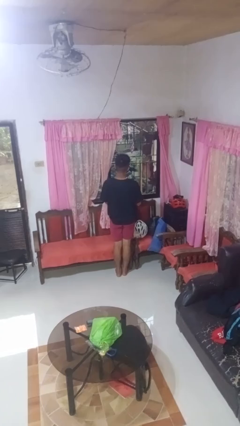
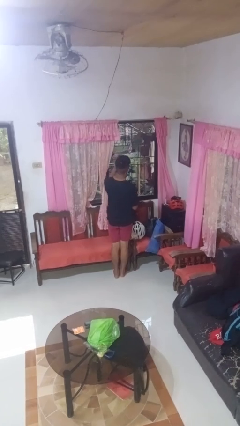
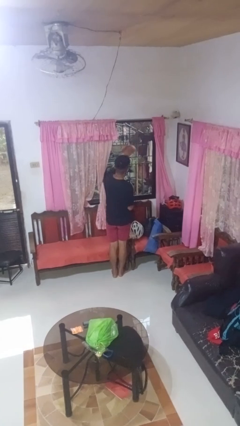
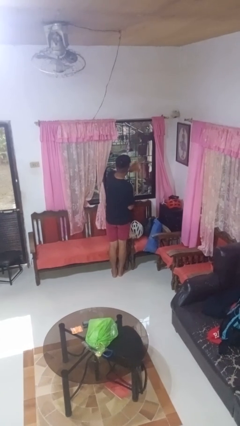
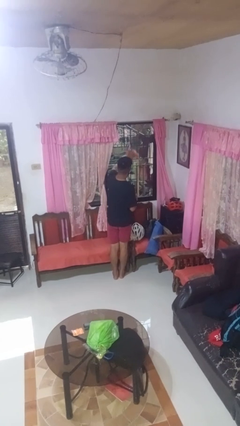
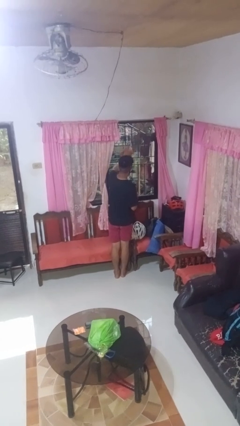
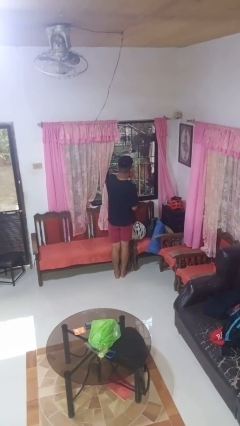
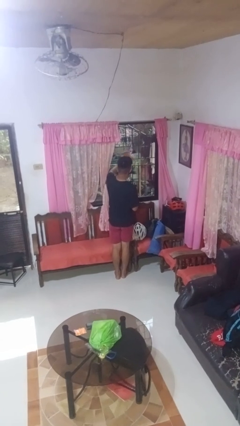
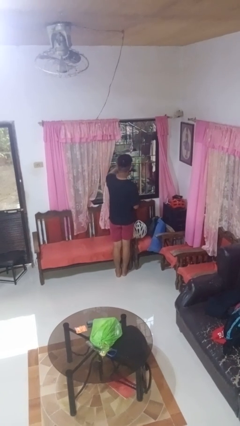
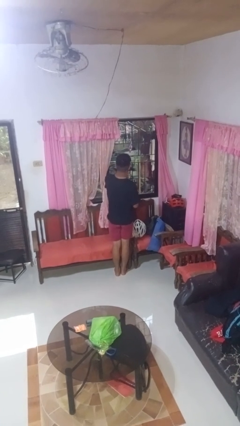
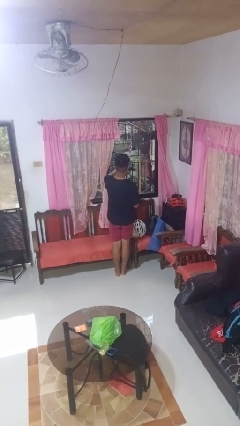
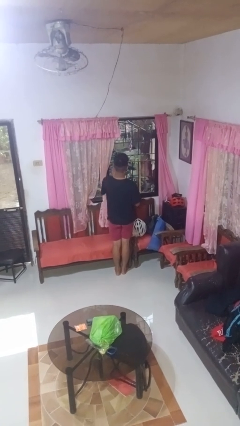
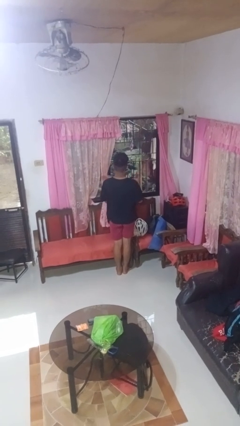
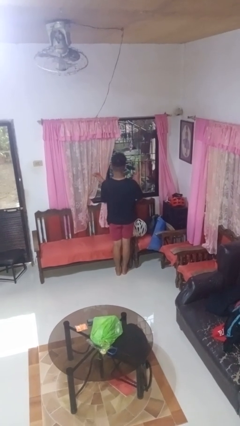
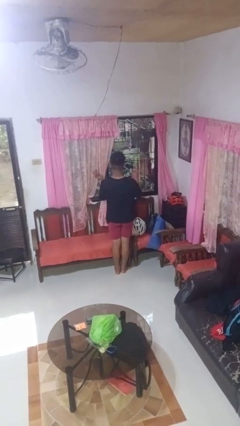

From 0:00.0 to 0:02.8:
person washes window

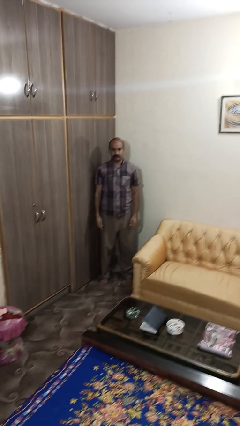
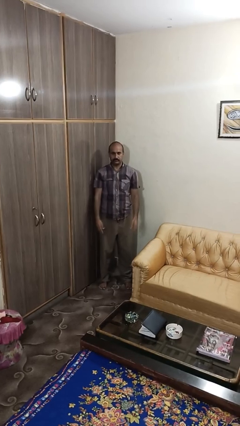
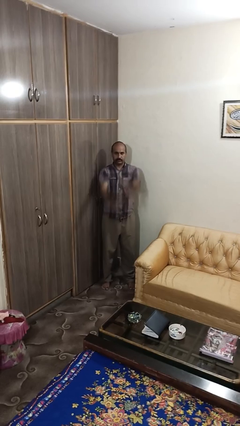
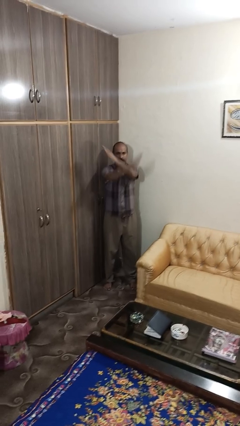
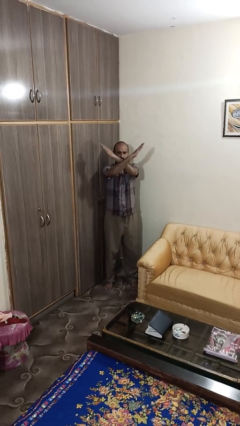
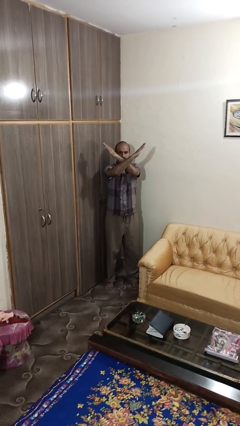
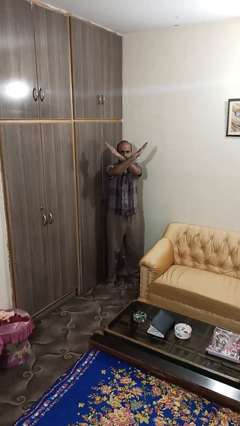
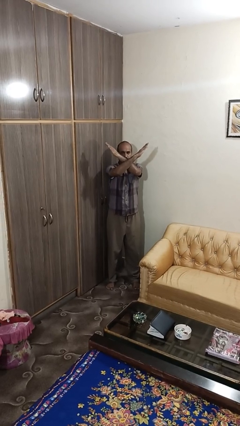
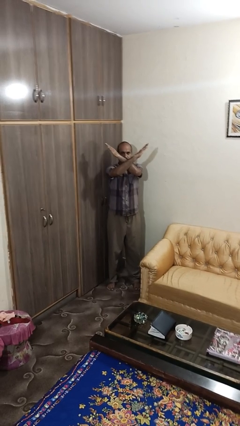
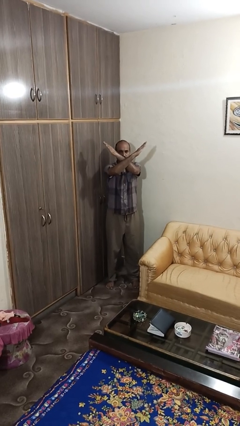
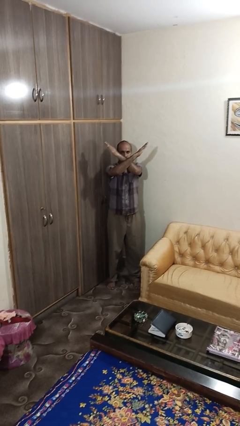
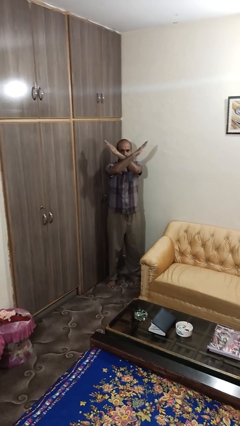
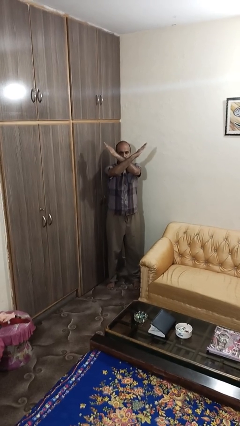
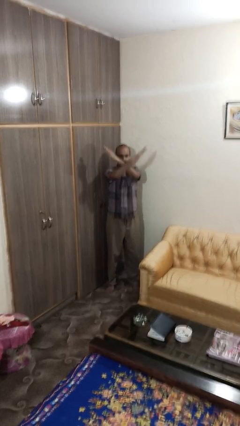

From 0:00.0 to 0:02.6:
person gestures arms x

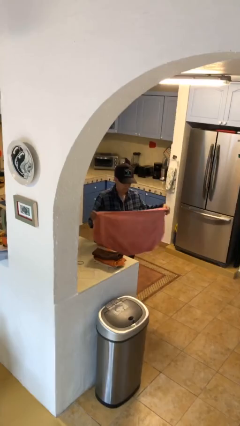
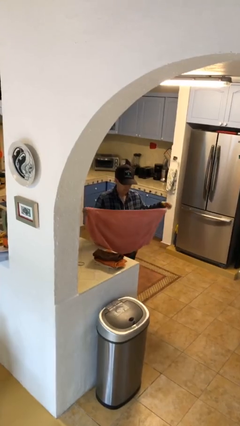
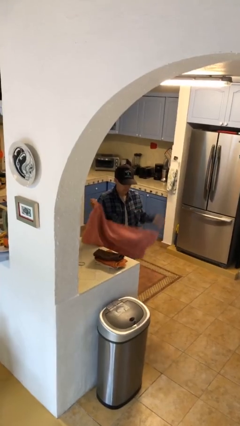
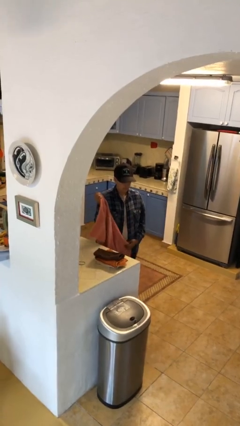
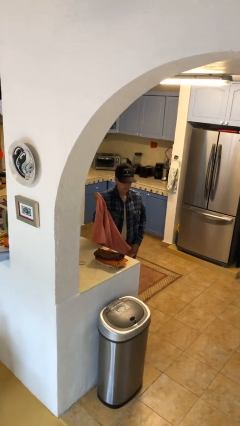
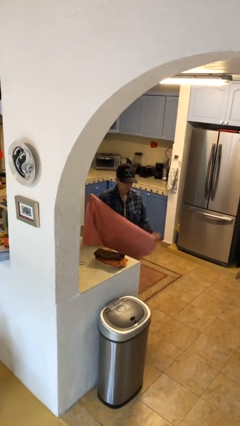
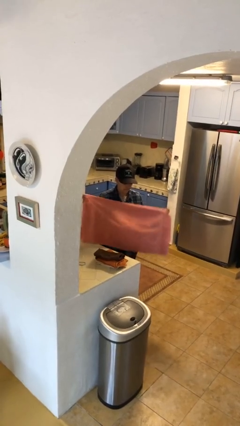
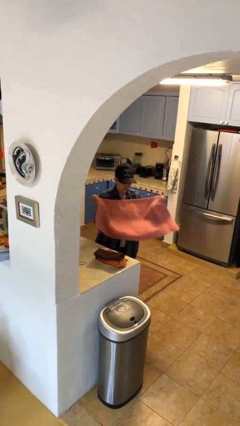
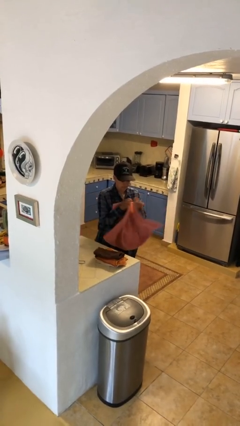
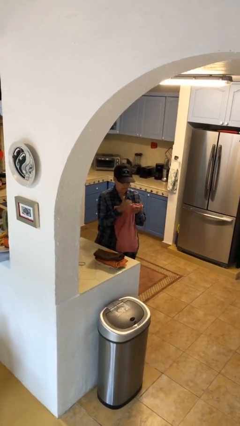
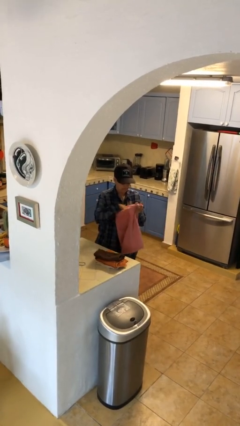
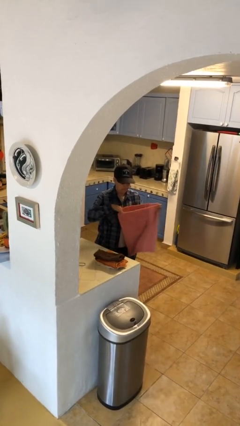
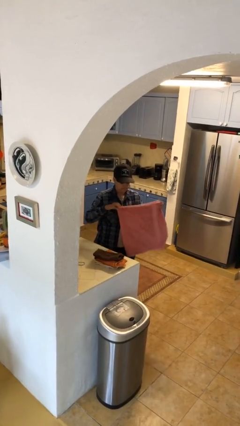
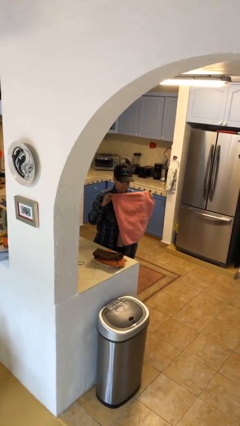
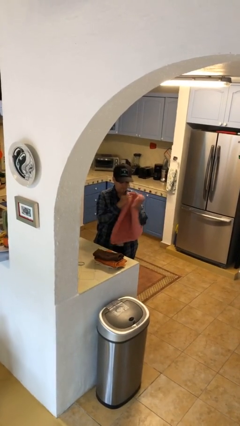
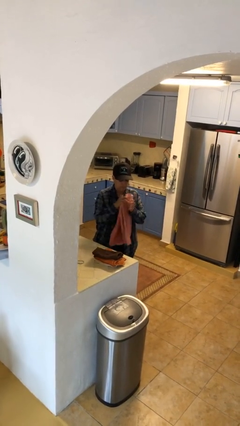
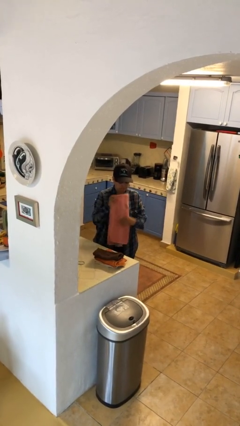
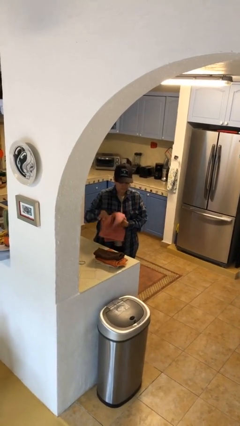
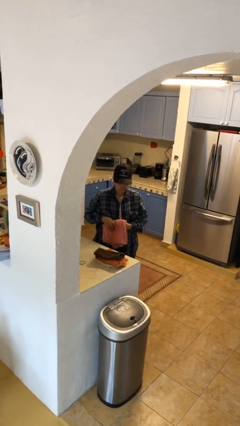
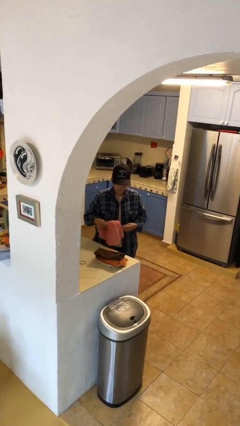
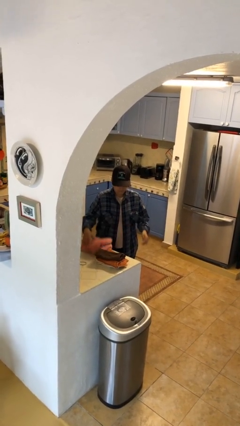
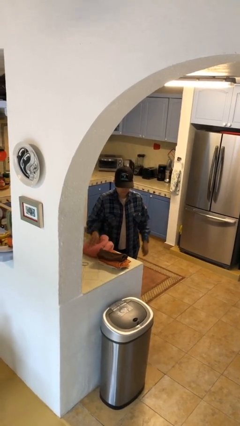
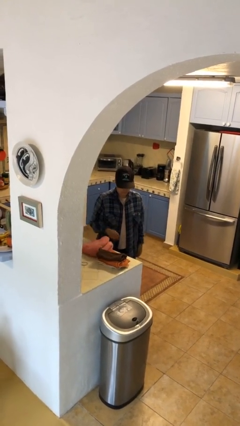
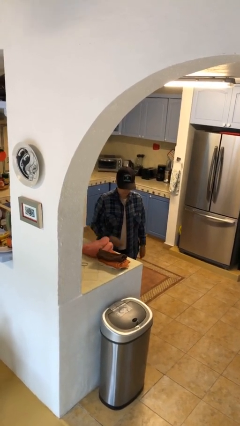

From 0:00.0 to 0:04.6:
person folds towel

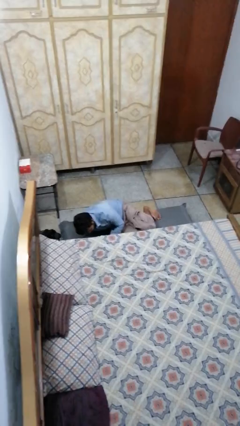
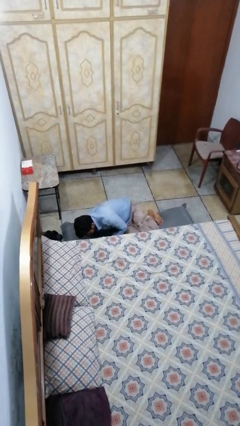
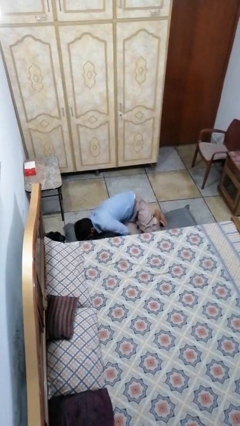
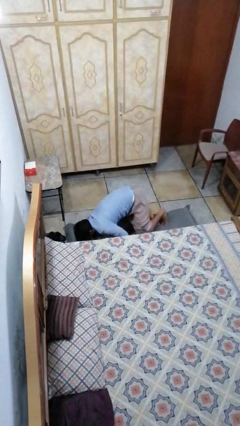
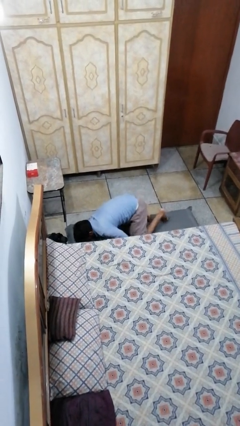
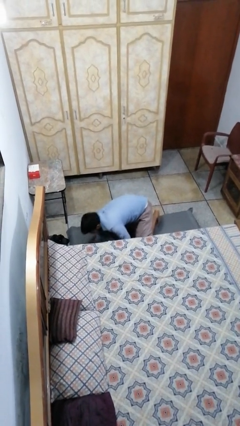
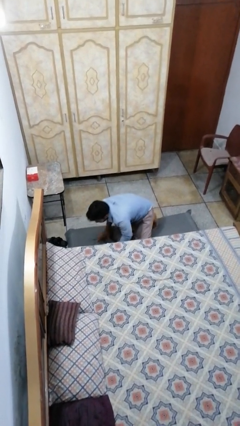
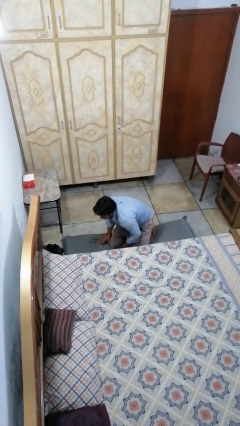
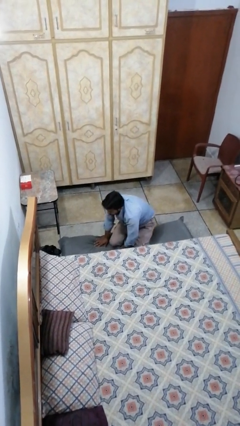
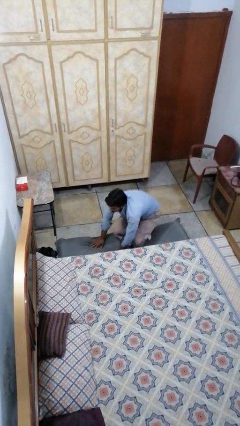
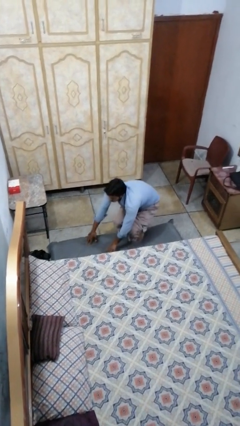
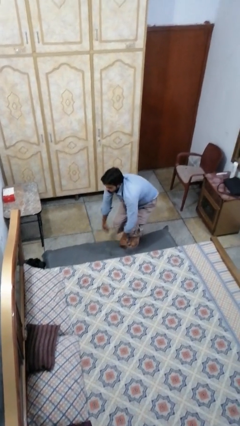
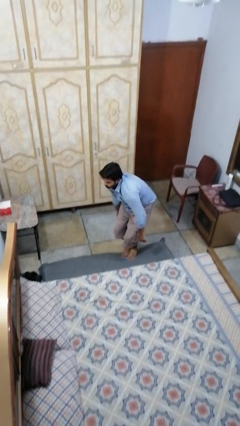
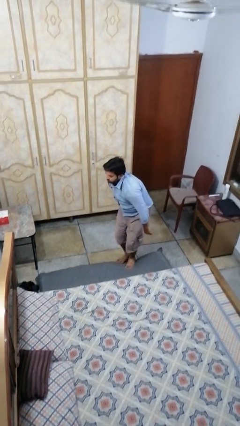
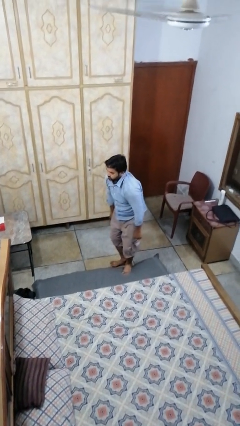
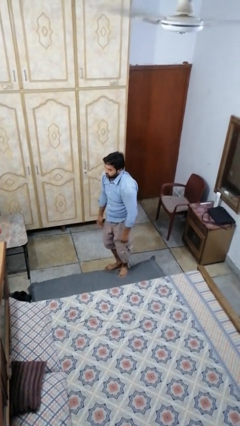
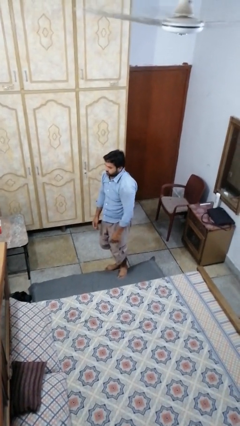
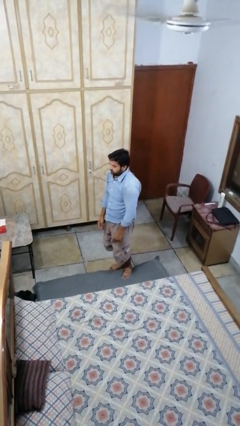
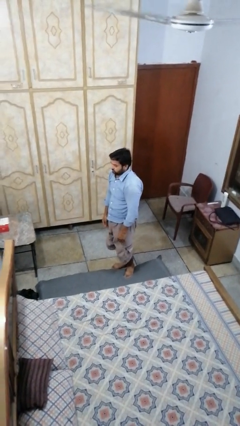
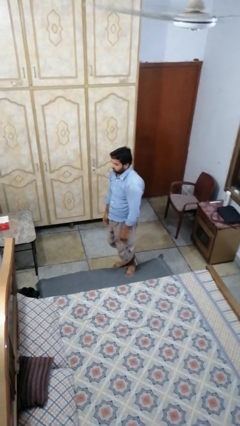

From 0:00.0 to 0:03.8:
person stands up from floor

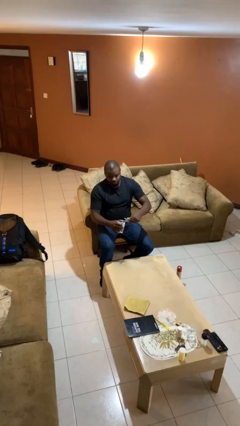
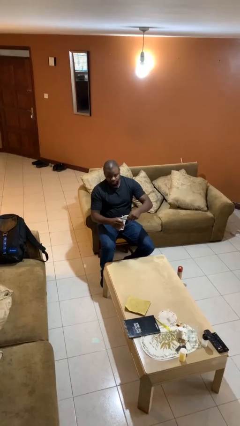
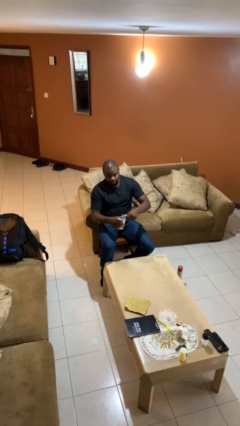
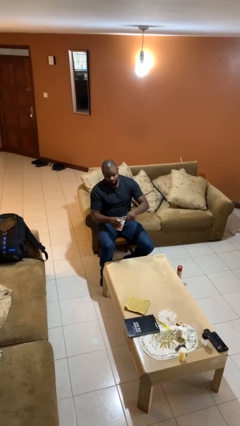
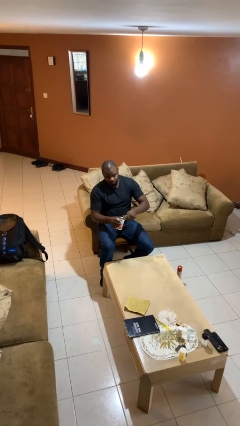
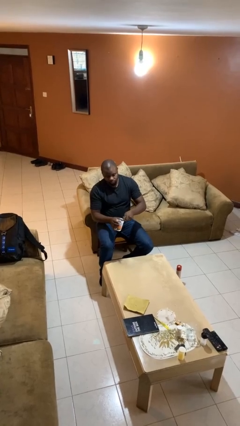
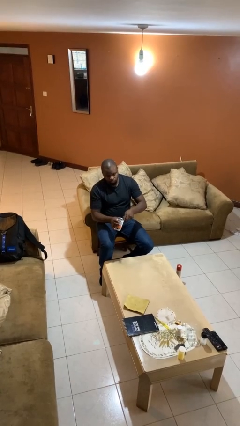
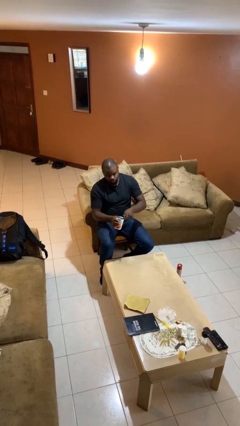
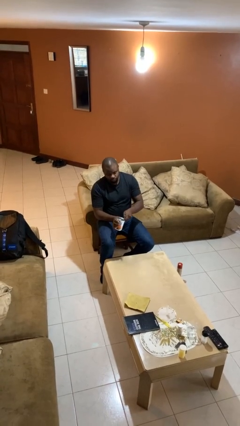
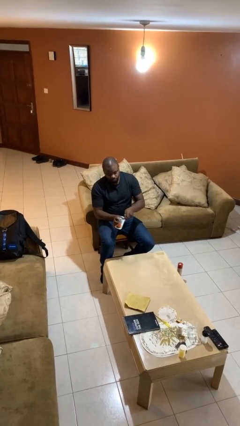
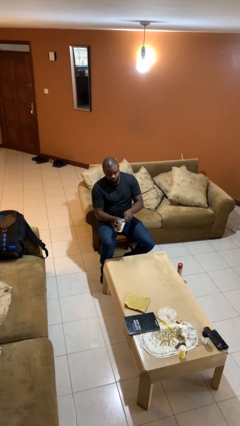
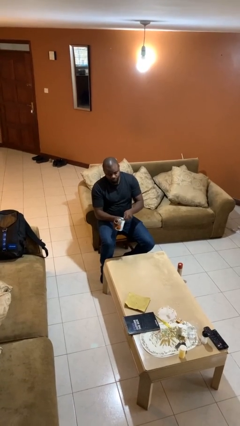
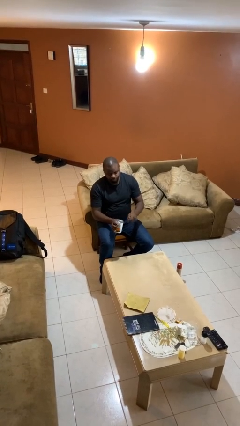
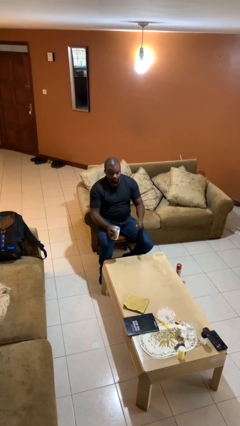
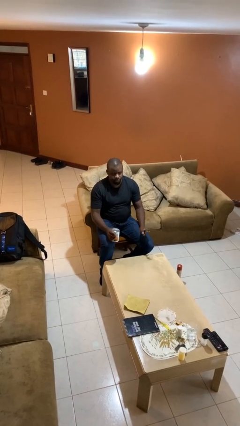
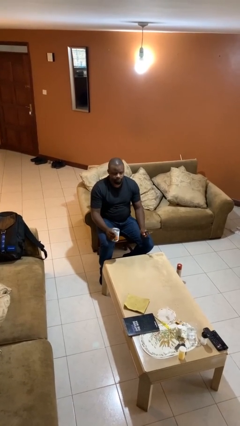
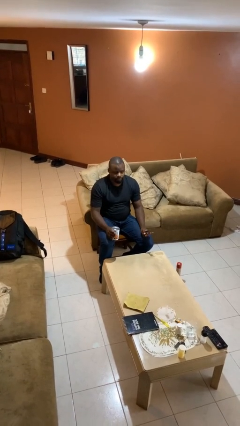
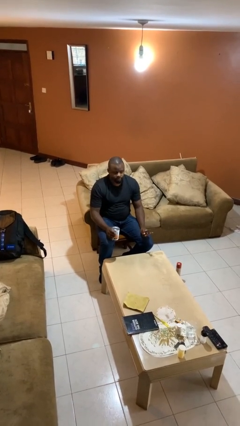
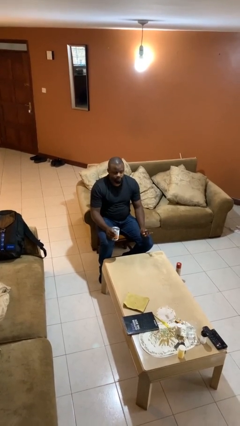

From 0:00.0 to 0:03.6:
person opens can with can opener
